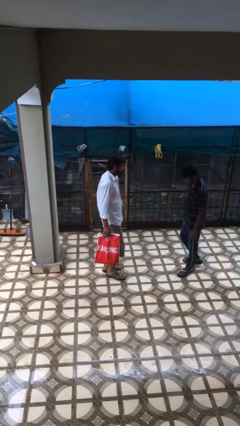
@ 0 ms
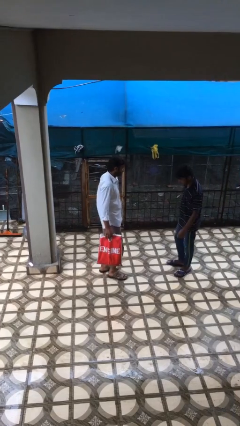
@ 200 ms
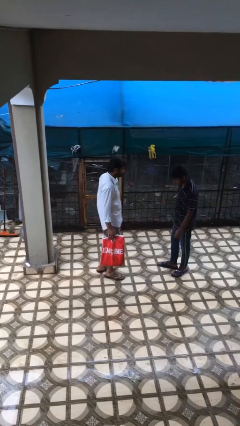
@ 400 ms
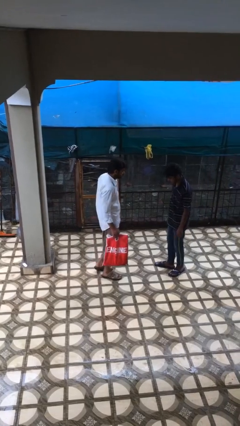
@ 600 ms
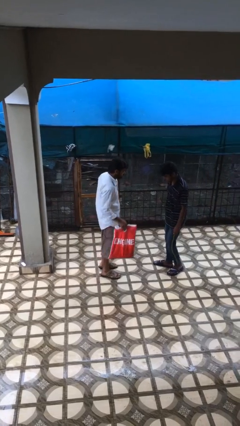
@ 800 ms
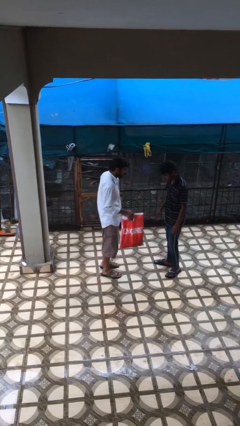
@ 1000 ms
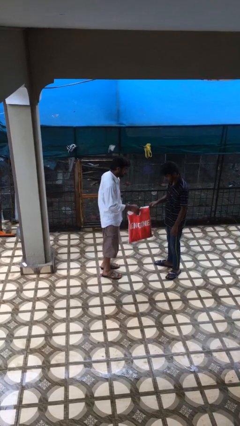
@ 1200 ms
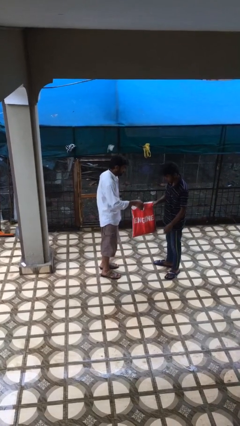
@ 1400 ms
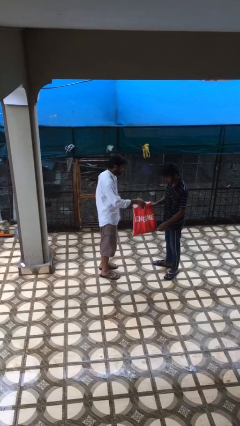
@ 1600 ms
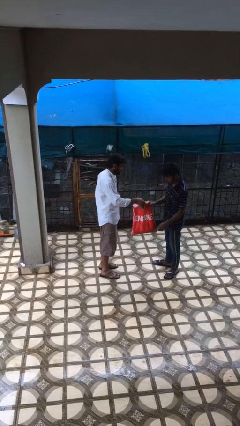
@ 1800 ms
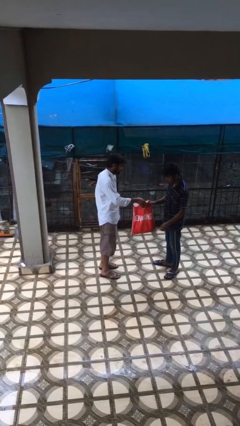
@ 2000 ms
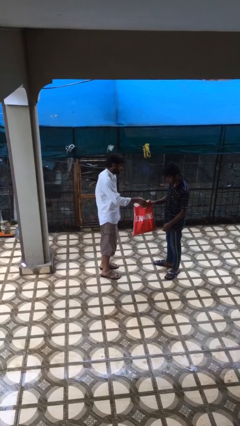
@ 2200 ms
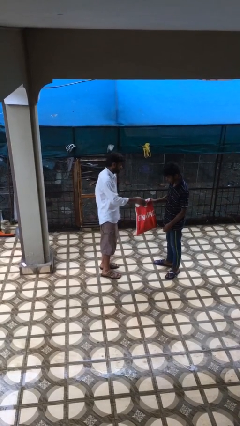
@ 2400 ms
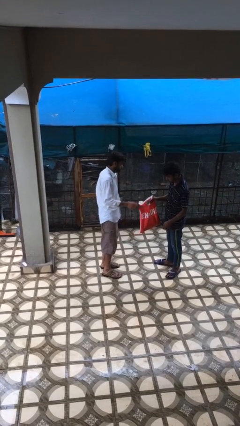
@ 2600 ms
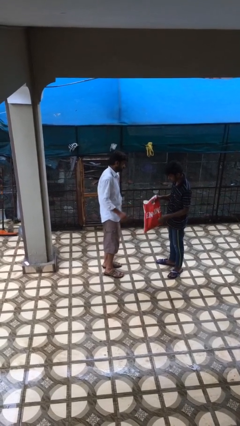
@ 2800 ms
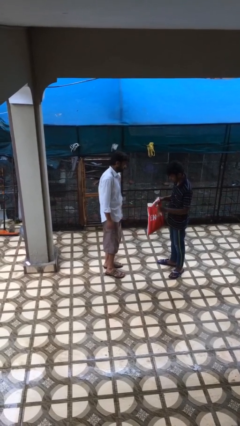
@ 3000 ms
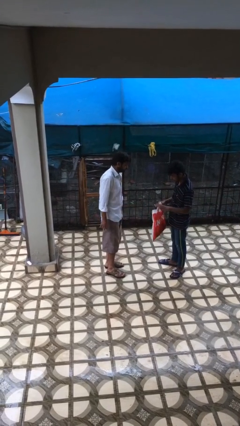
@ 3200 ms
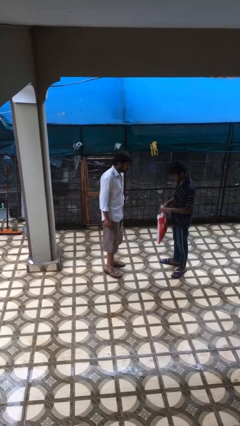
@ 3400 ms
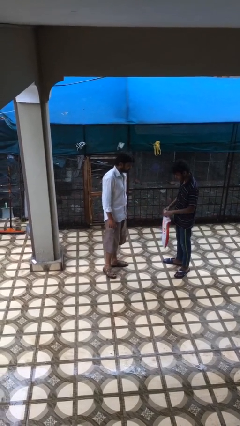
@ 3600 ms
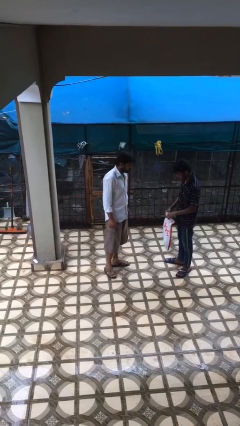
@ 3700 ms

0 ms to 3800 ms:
person transfers object to person

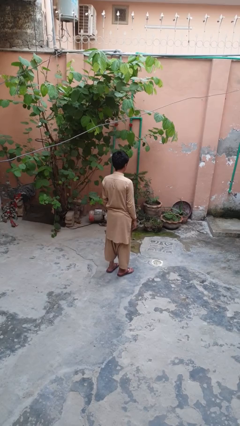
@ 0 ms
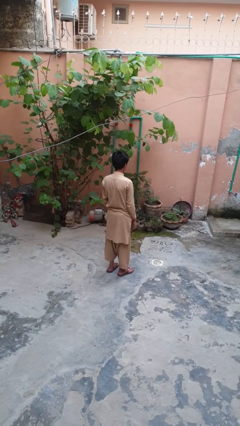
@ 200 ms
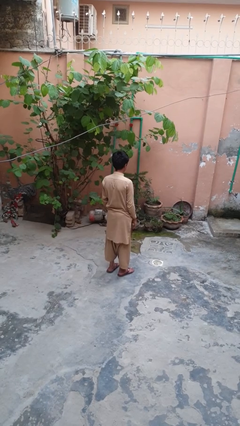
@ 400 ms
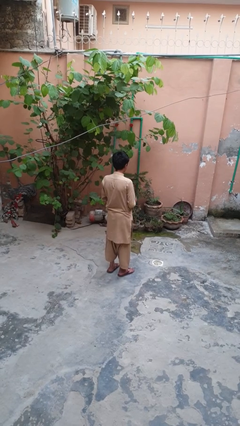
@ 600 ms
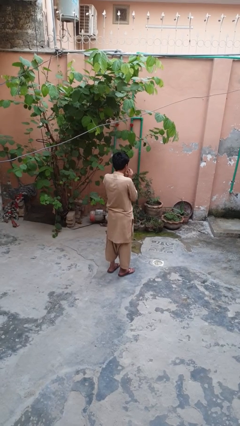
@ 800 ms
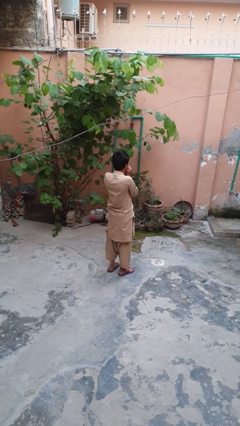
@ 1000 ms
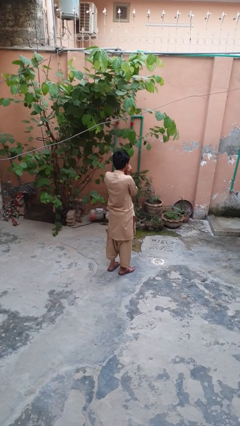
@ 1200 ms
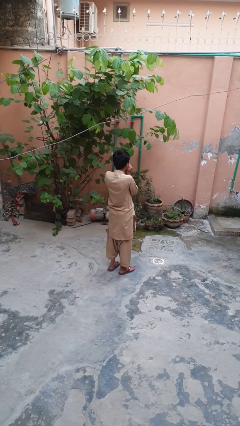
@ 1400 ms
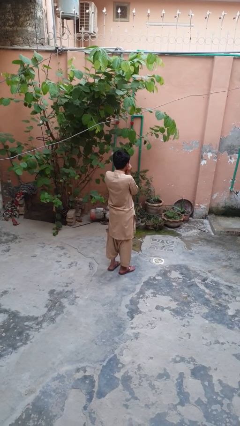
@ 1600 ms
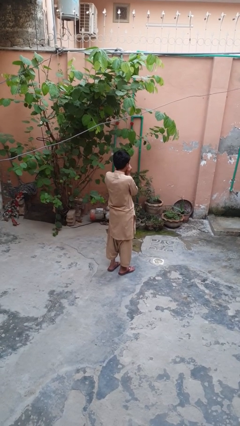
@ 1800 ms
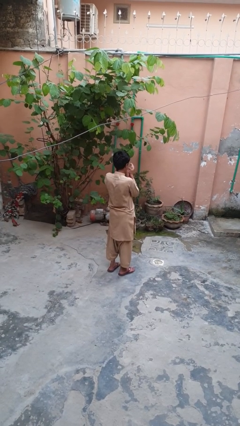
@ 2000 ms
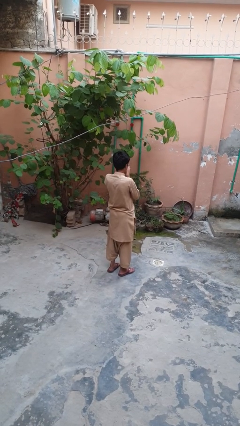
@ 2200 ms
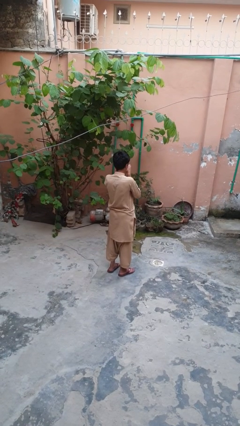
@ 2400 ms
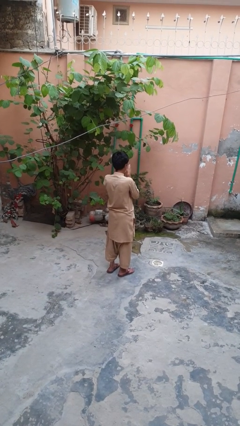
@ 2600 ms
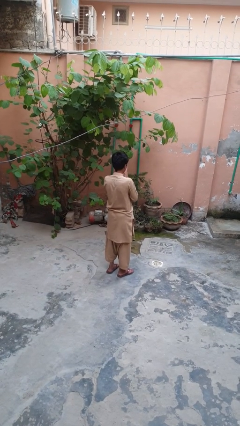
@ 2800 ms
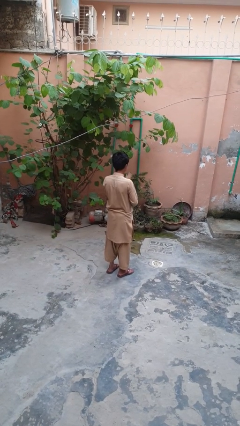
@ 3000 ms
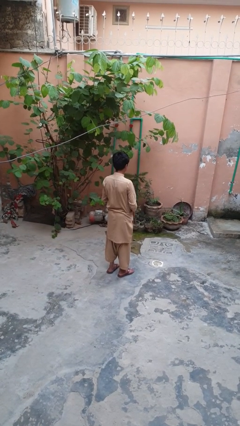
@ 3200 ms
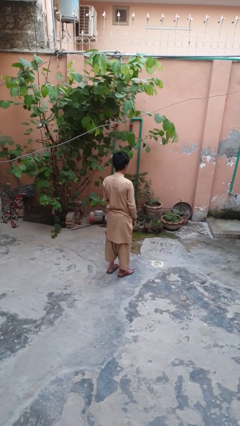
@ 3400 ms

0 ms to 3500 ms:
person blows into hands

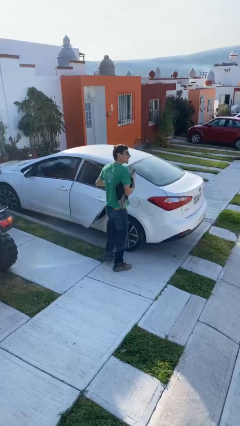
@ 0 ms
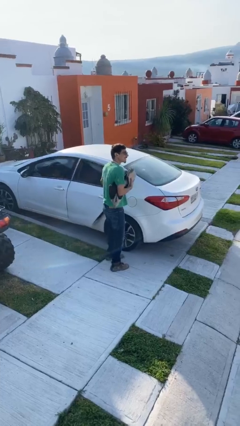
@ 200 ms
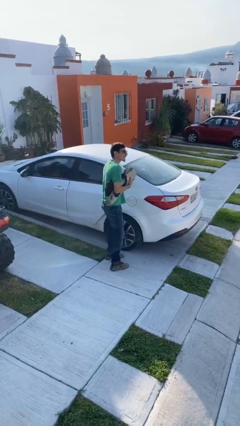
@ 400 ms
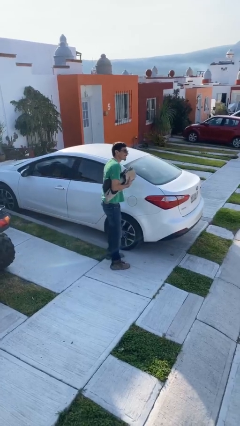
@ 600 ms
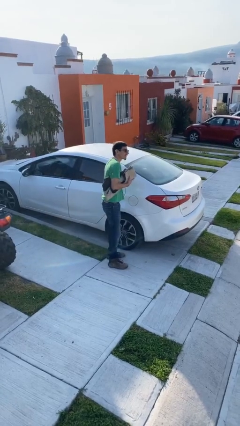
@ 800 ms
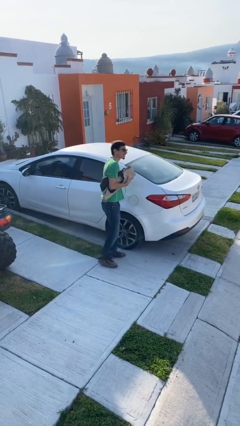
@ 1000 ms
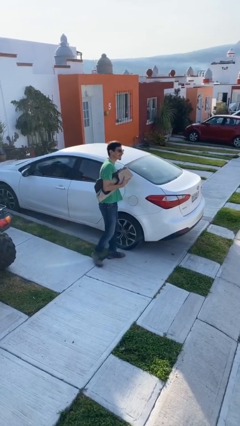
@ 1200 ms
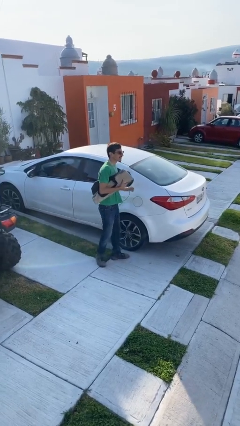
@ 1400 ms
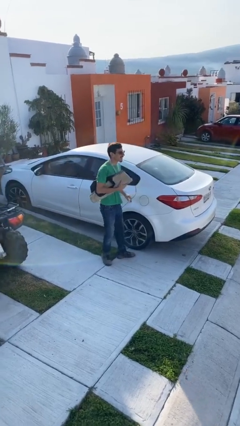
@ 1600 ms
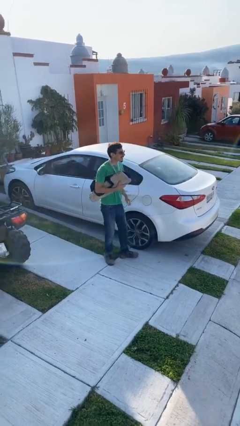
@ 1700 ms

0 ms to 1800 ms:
person closes car door

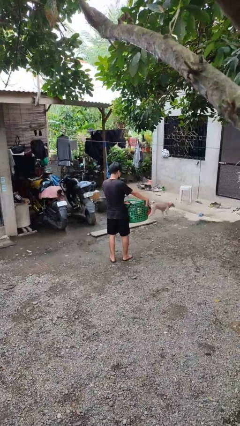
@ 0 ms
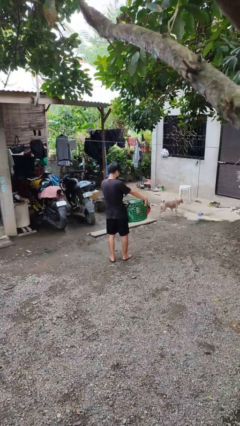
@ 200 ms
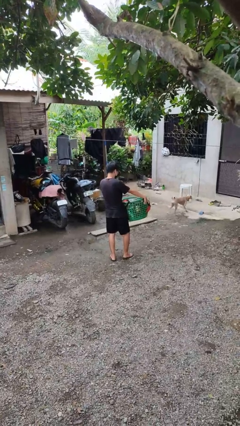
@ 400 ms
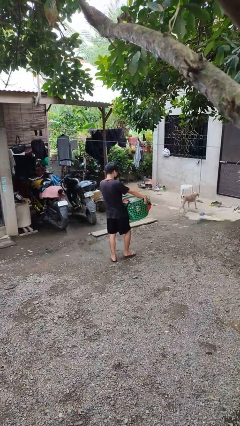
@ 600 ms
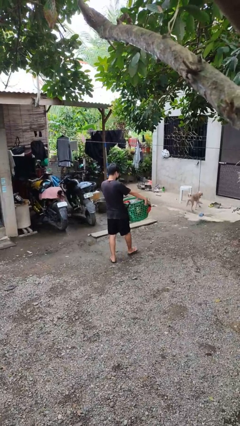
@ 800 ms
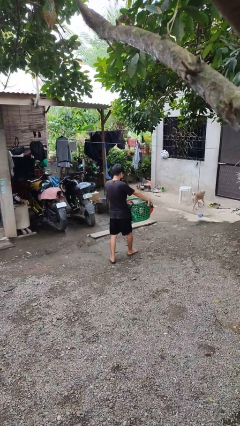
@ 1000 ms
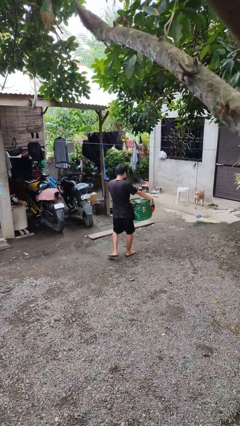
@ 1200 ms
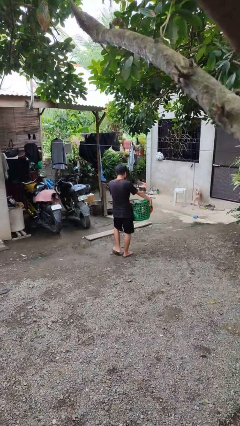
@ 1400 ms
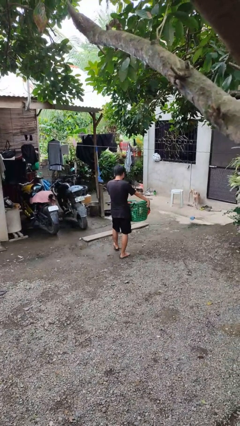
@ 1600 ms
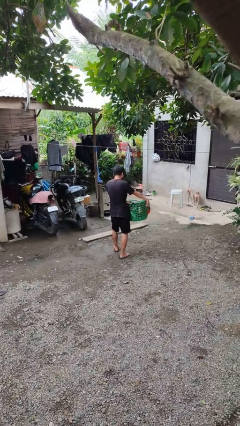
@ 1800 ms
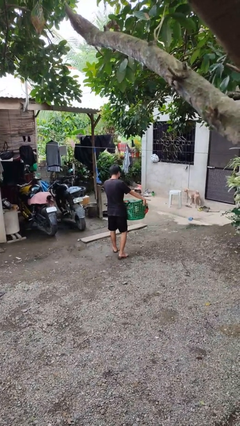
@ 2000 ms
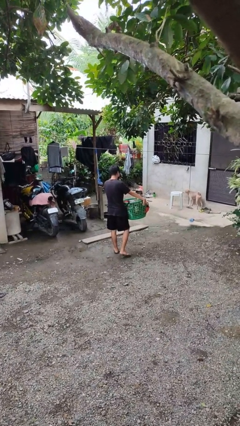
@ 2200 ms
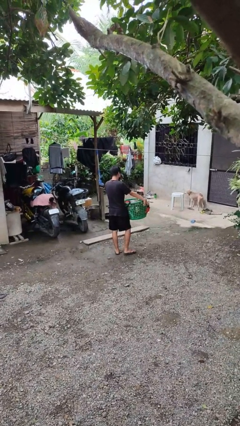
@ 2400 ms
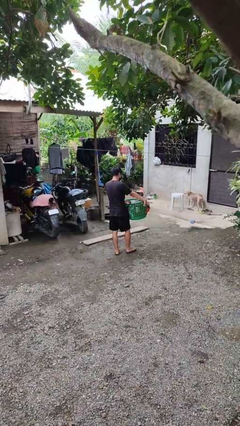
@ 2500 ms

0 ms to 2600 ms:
person carries laundry basket

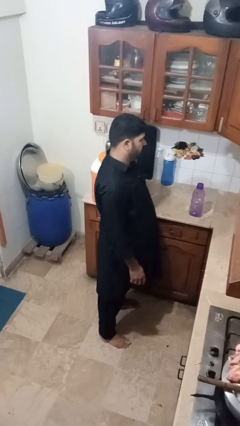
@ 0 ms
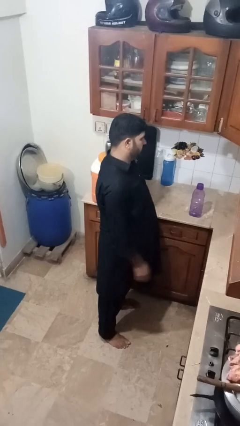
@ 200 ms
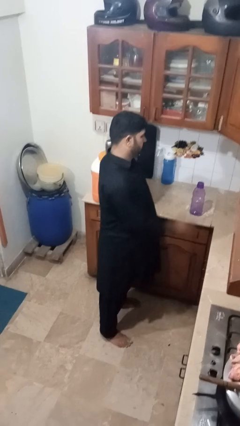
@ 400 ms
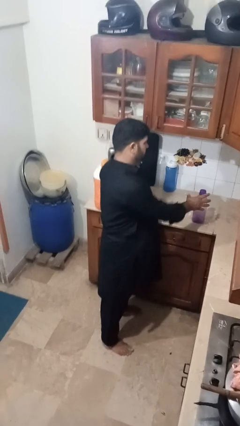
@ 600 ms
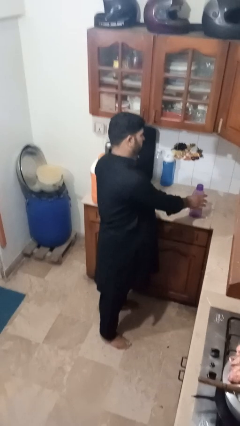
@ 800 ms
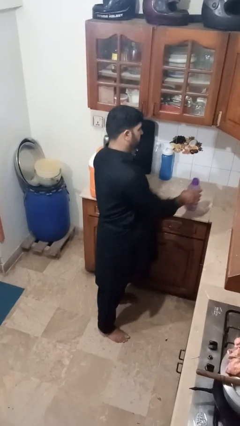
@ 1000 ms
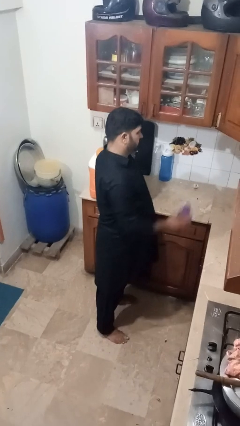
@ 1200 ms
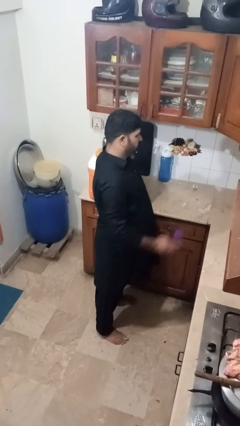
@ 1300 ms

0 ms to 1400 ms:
person picks up object from countertop

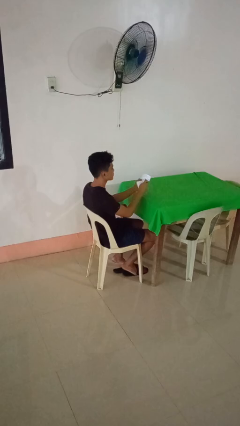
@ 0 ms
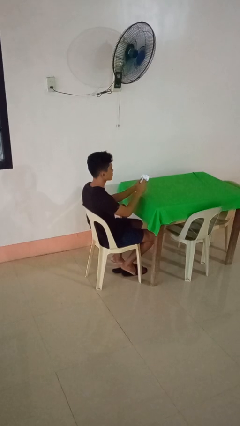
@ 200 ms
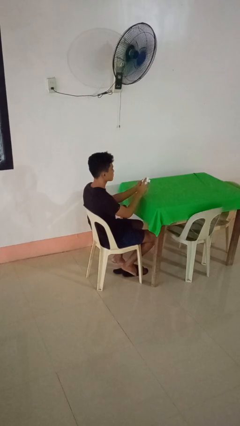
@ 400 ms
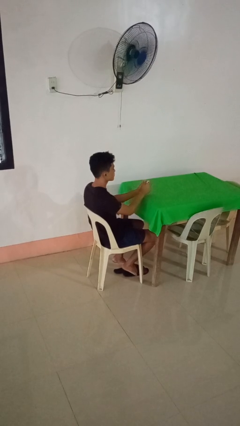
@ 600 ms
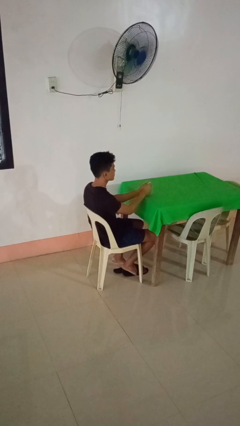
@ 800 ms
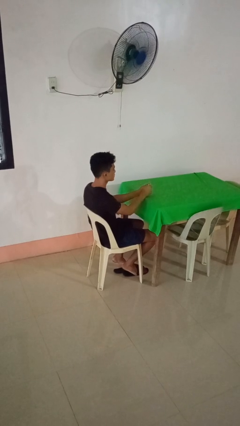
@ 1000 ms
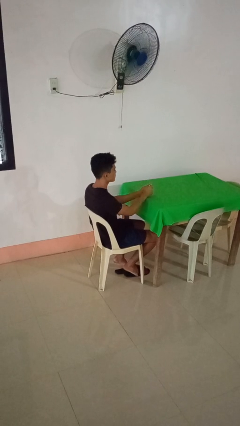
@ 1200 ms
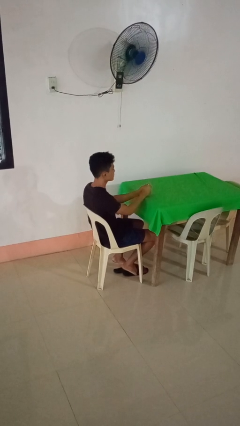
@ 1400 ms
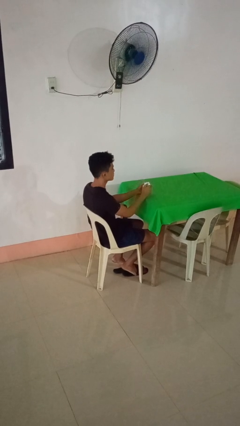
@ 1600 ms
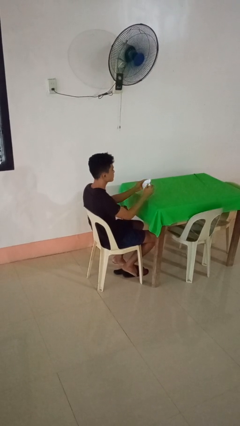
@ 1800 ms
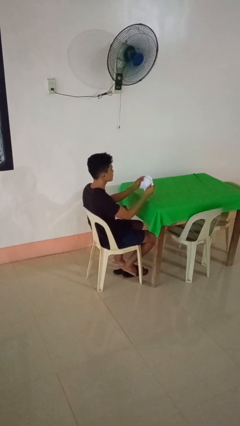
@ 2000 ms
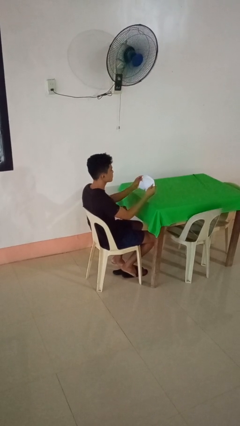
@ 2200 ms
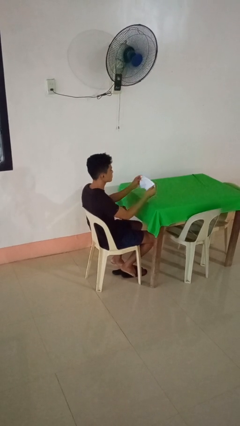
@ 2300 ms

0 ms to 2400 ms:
person crumples paper

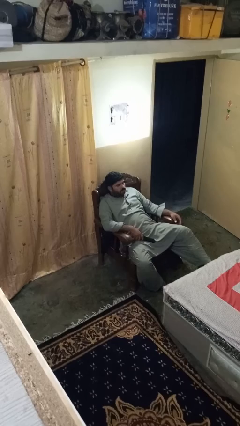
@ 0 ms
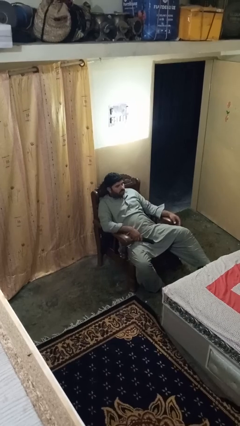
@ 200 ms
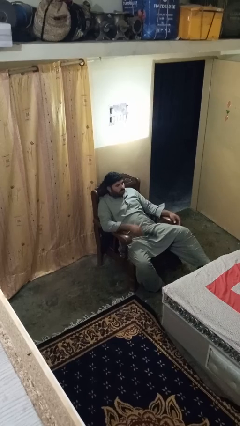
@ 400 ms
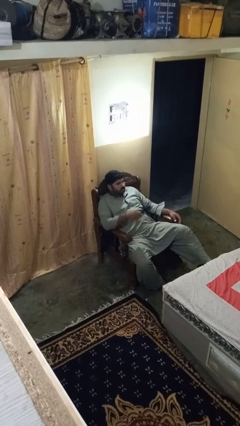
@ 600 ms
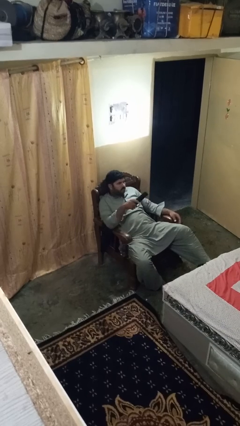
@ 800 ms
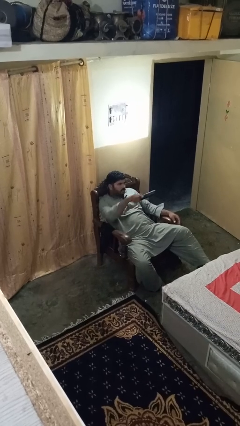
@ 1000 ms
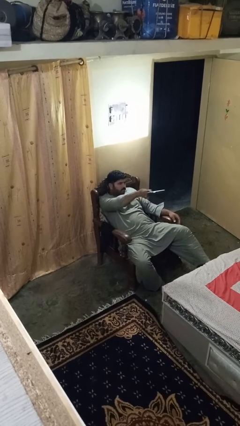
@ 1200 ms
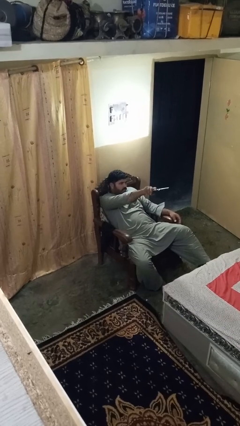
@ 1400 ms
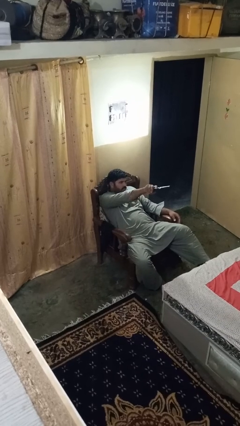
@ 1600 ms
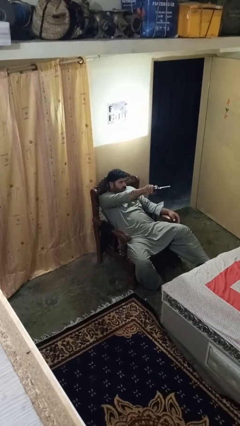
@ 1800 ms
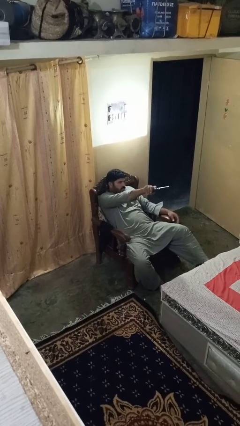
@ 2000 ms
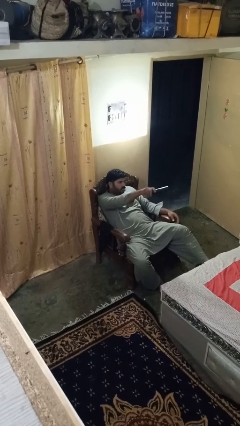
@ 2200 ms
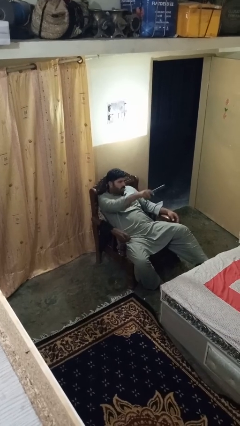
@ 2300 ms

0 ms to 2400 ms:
person uses television remote
